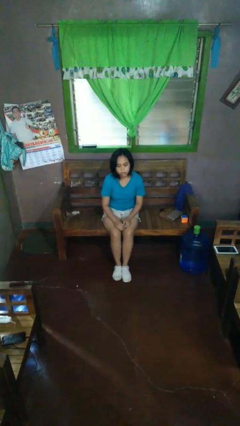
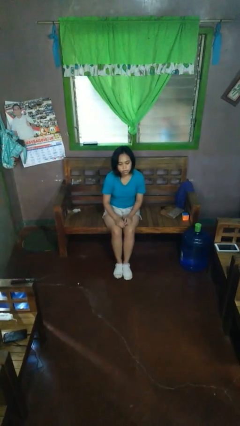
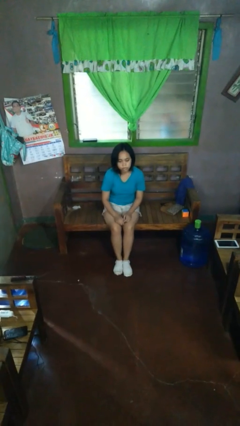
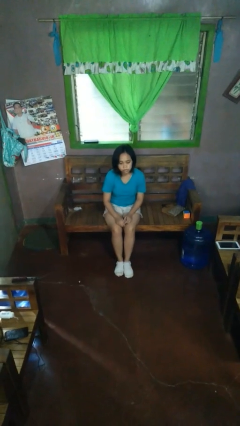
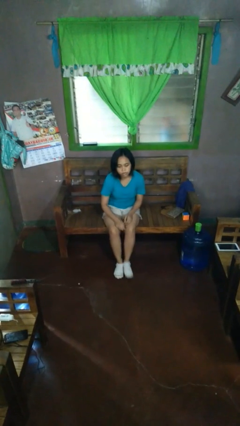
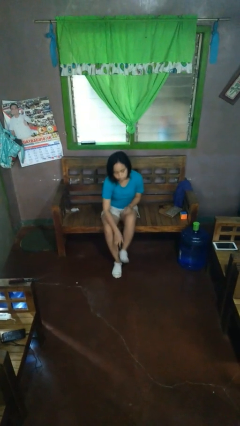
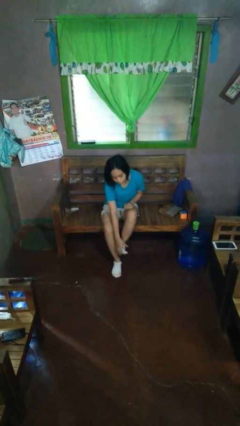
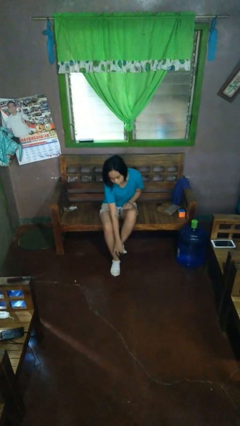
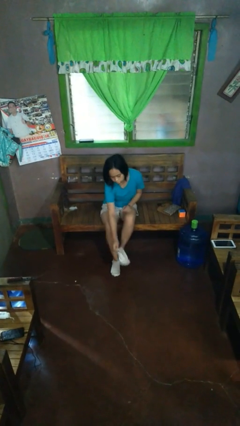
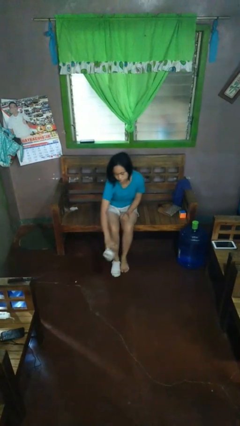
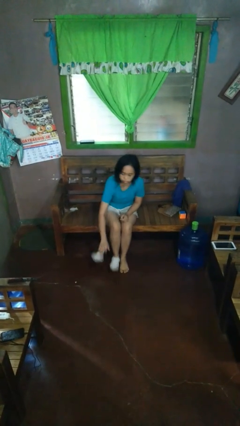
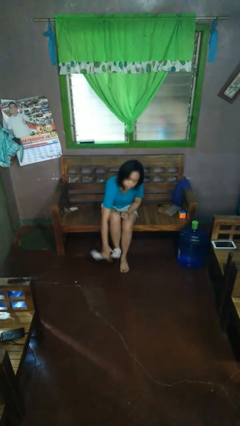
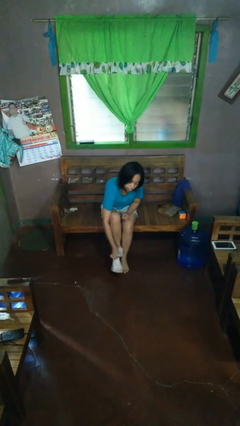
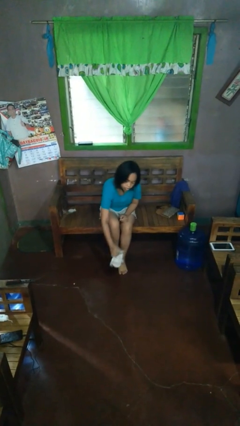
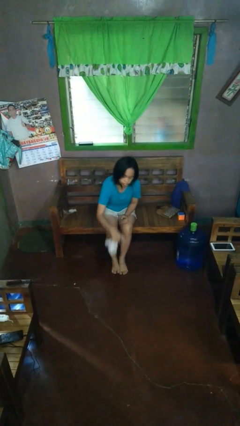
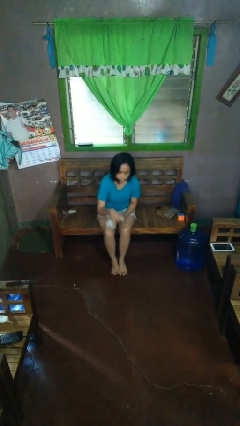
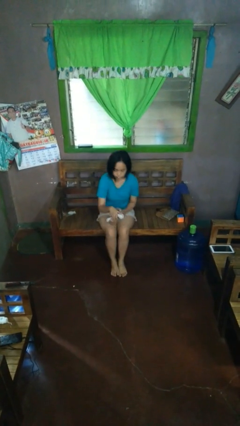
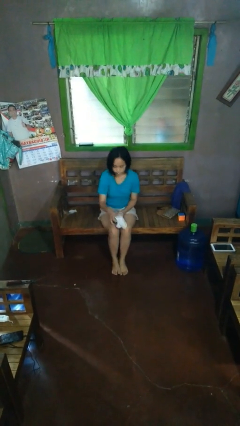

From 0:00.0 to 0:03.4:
person takes off socks

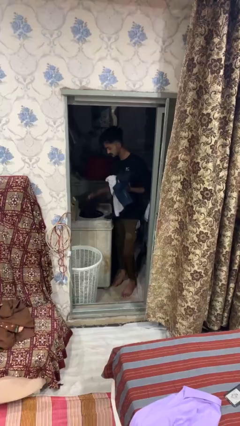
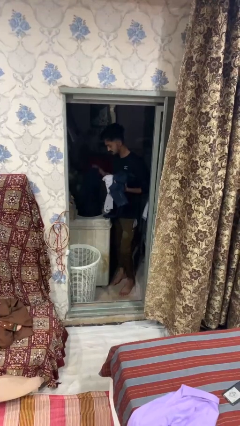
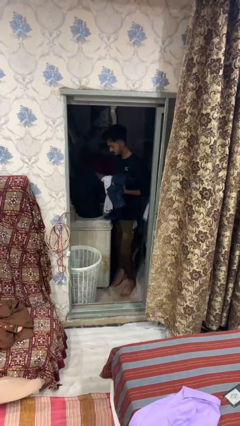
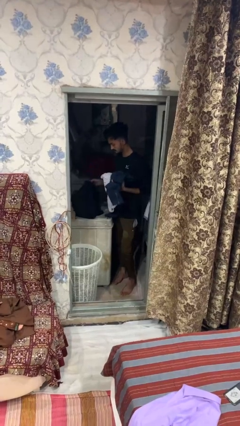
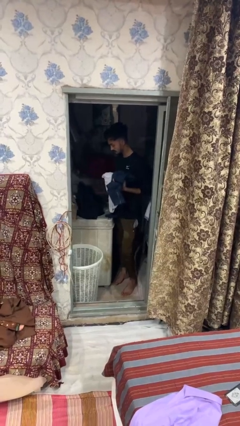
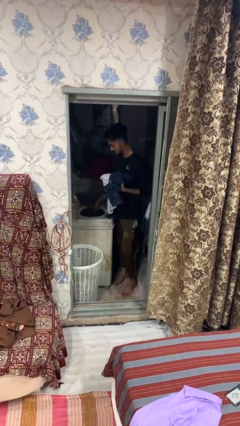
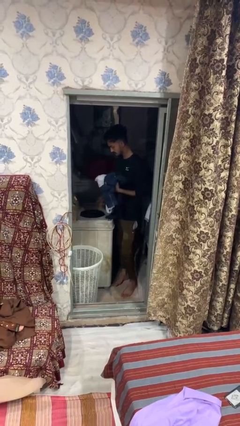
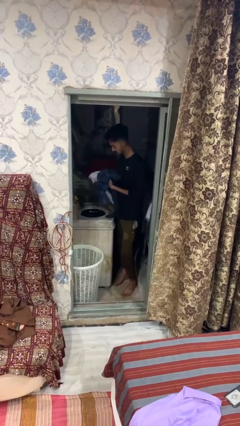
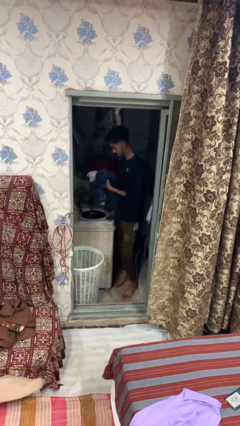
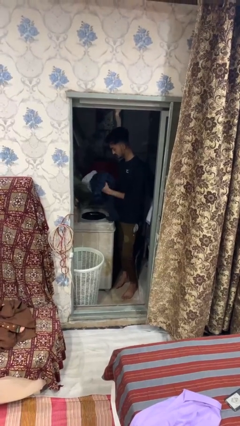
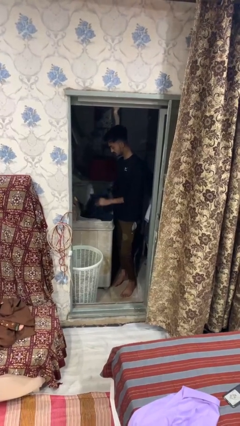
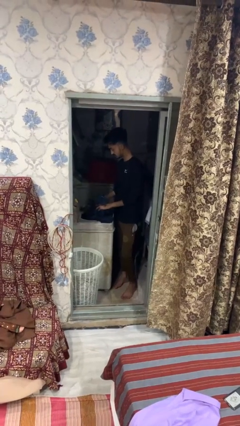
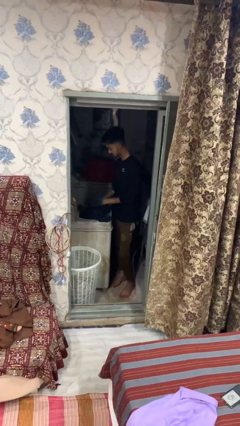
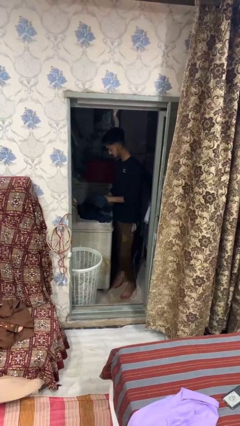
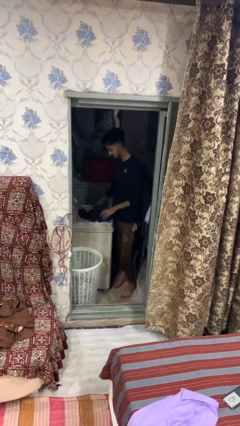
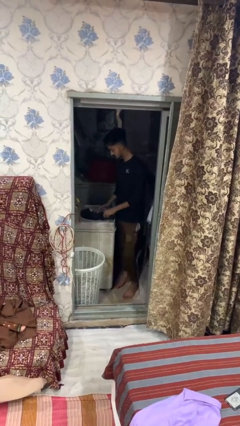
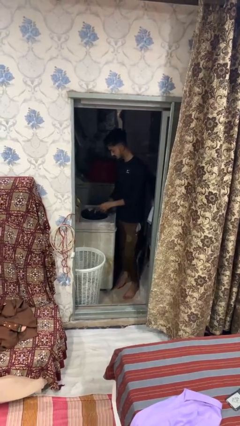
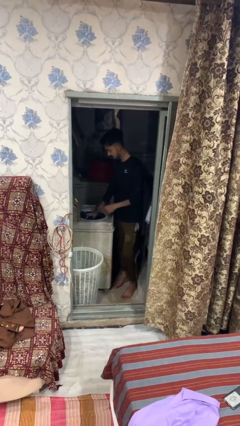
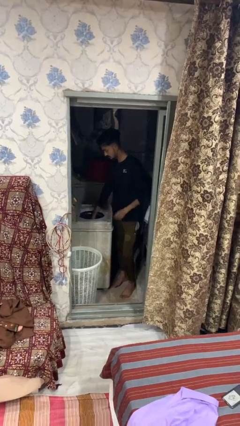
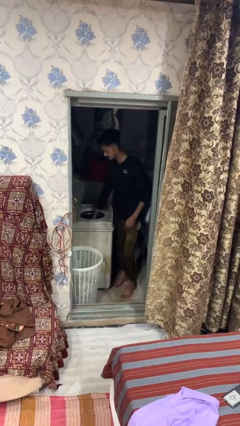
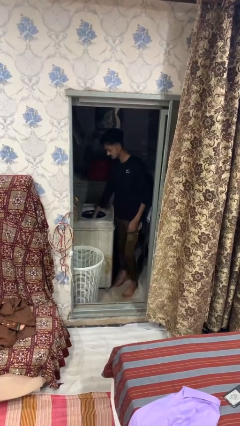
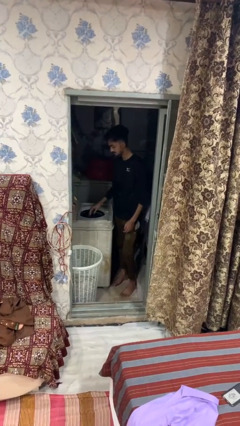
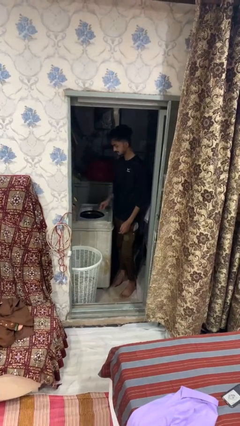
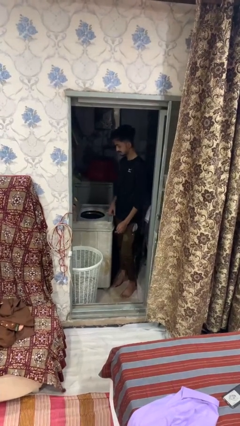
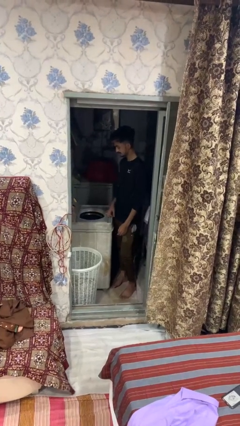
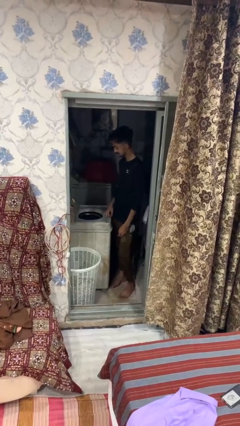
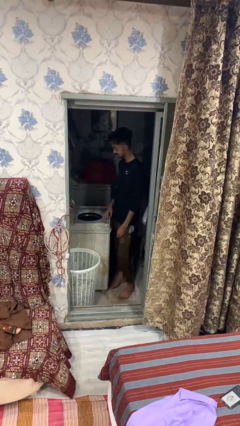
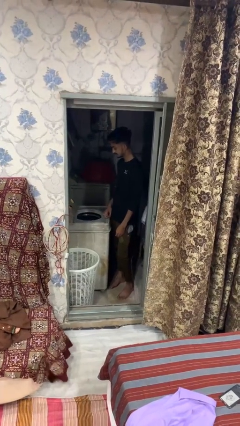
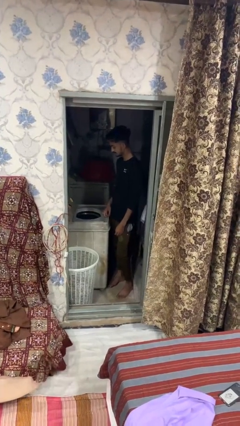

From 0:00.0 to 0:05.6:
person loads clotheswasher

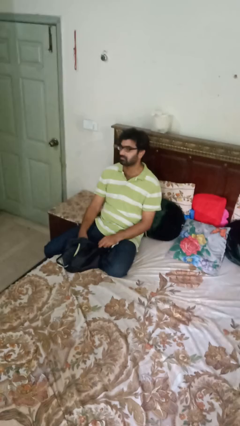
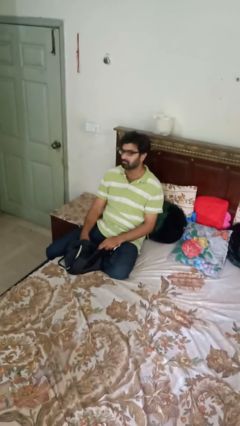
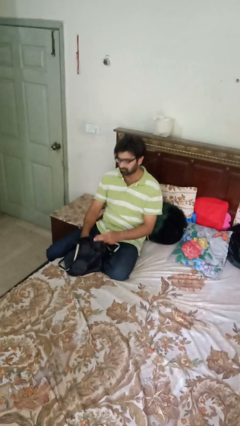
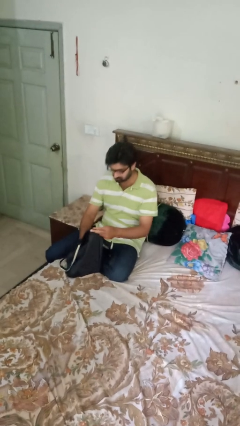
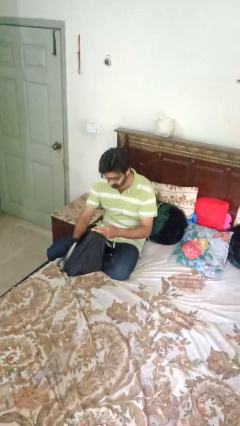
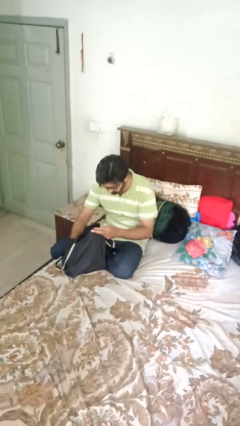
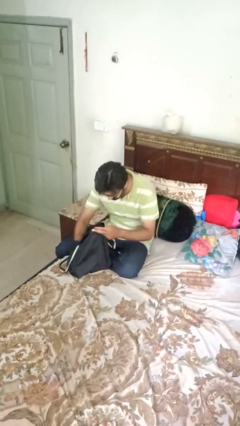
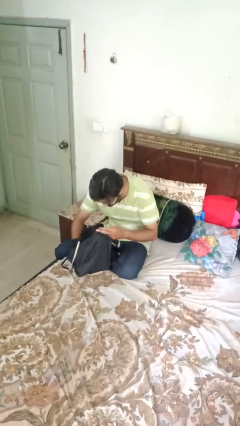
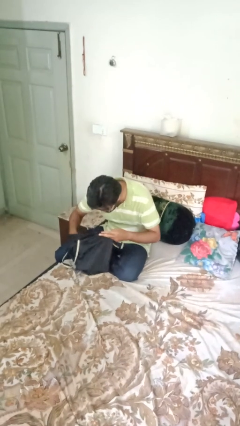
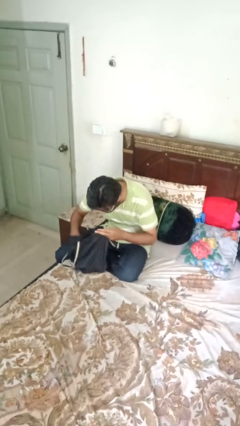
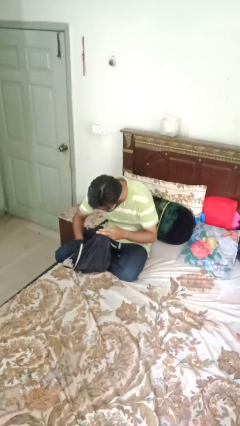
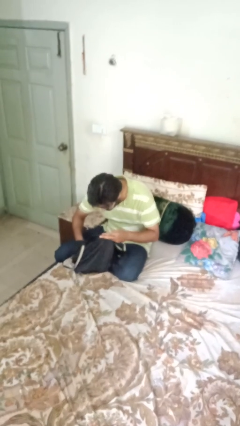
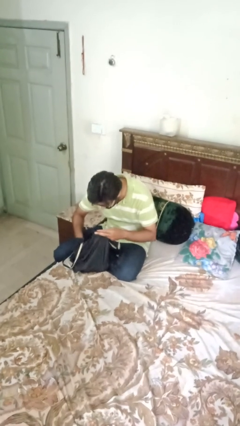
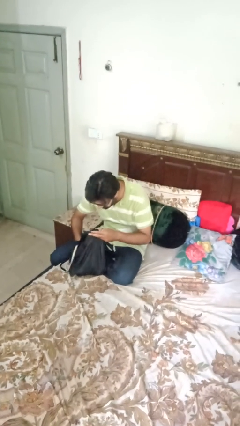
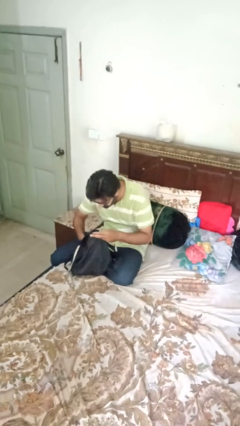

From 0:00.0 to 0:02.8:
person searches in bag

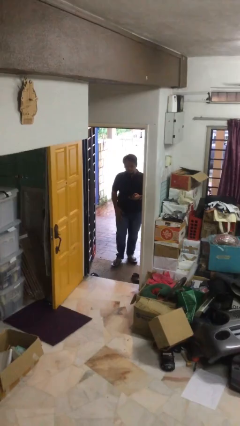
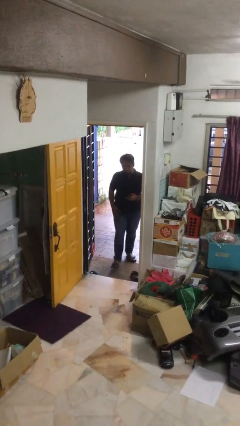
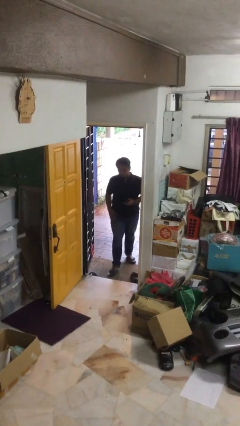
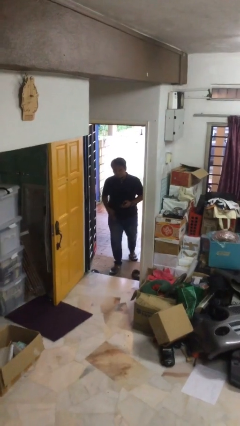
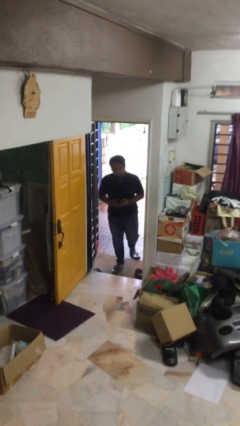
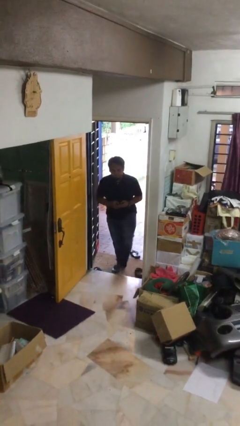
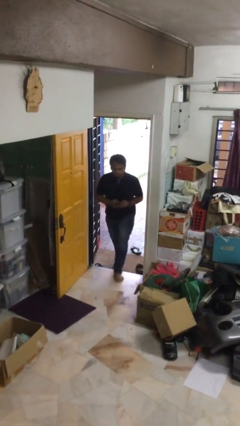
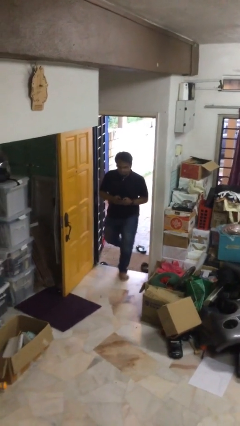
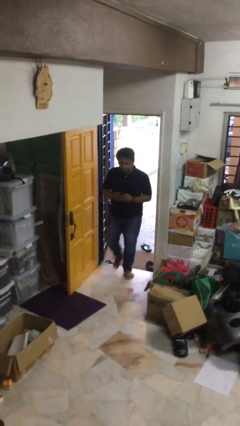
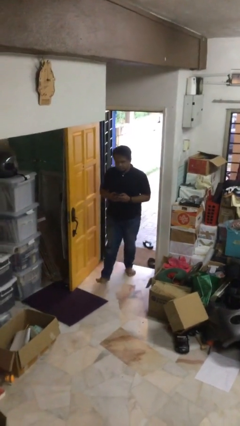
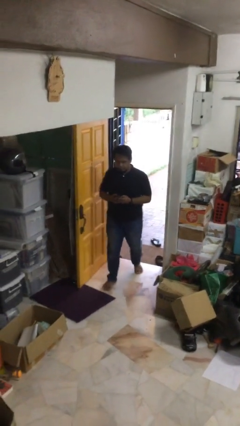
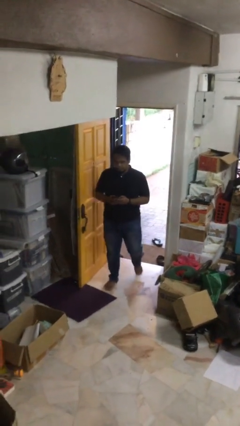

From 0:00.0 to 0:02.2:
person enters scene through structure

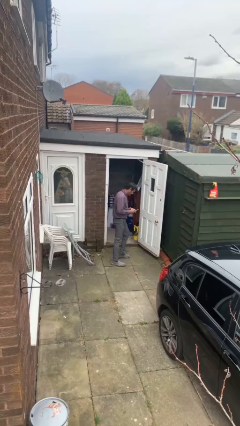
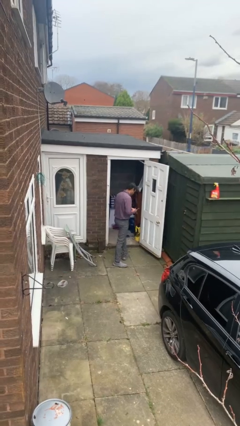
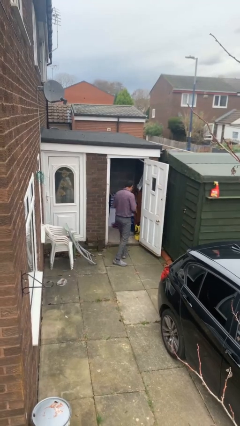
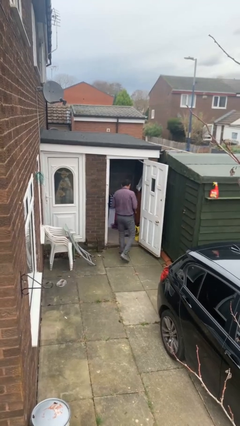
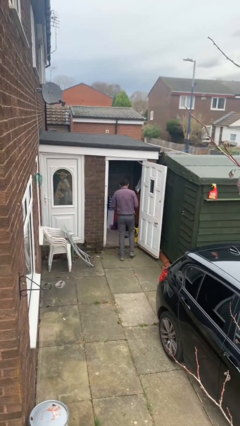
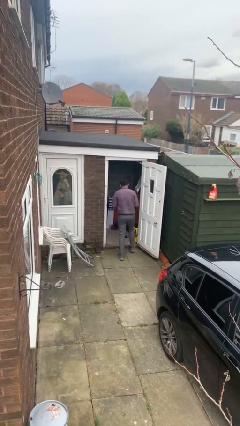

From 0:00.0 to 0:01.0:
person exits scene through structure

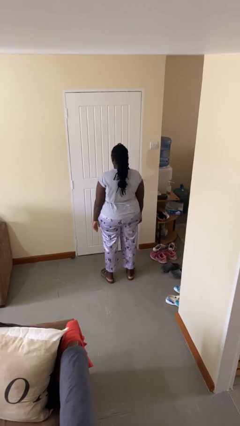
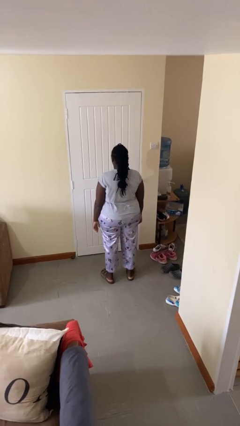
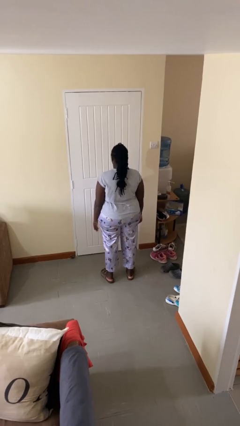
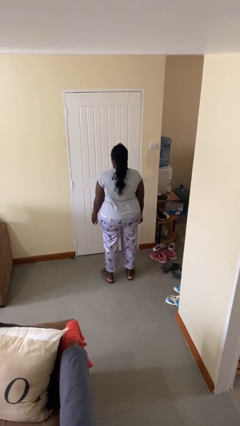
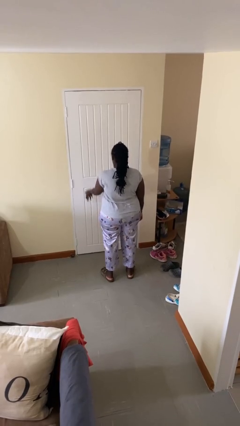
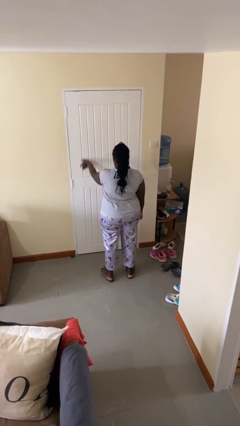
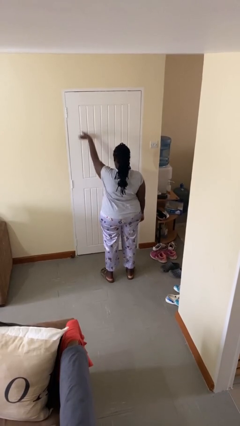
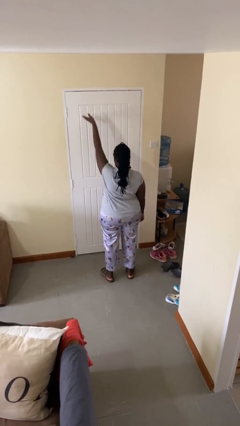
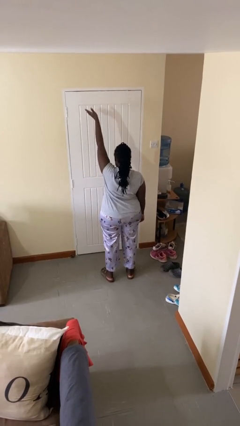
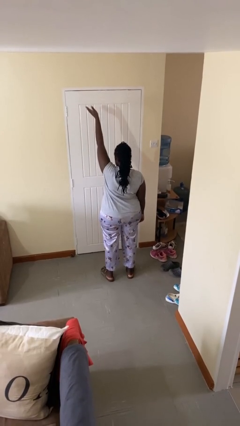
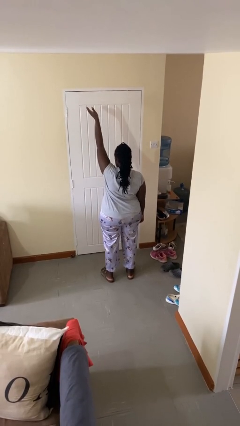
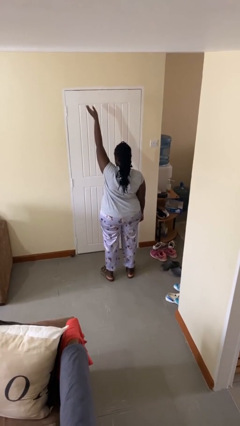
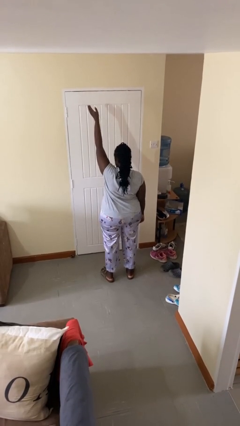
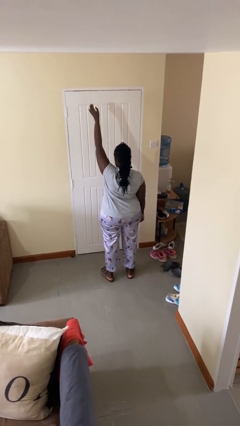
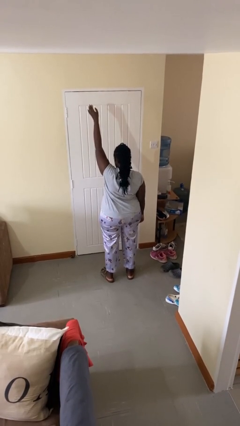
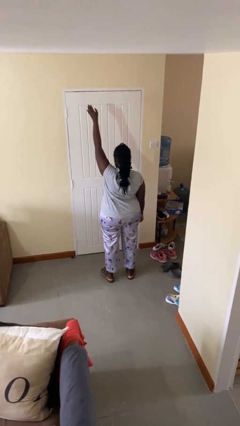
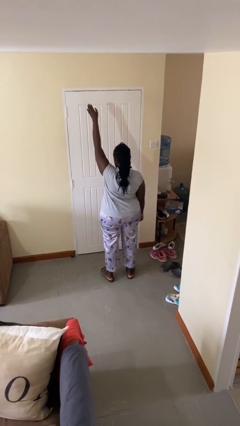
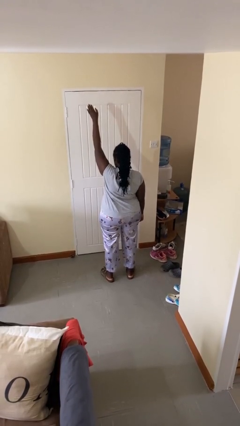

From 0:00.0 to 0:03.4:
person gestures swipe up
